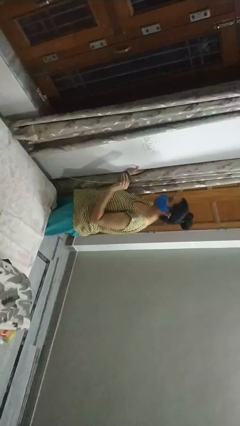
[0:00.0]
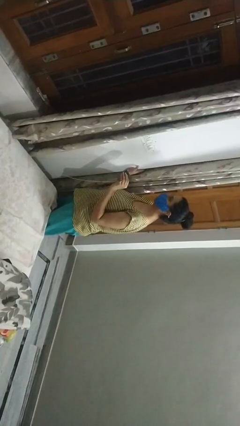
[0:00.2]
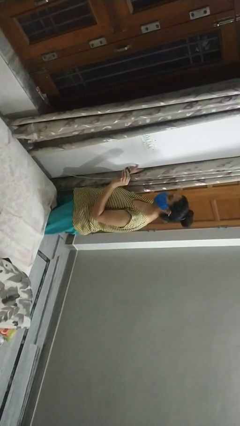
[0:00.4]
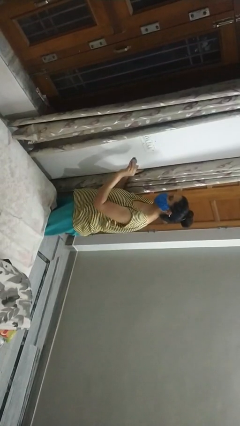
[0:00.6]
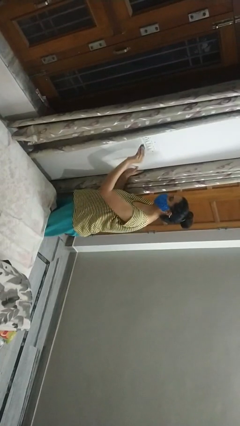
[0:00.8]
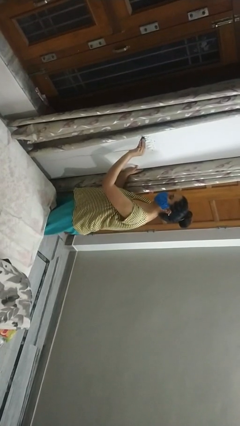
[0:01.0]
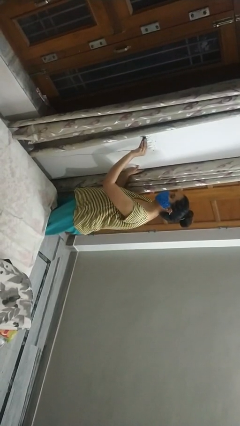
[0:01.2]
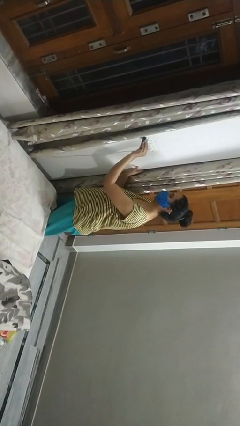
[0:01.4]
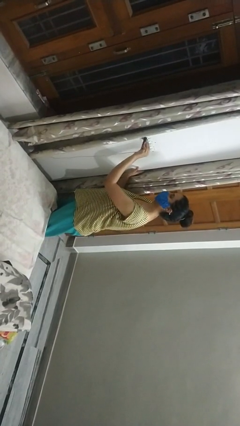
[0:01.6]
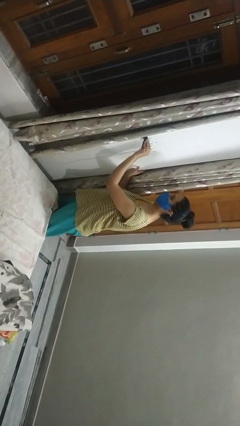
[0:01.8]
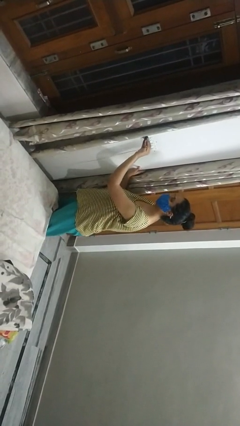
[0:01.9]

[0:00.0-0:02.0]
person plugs into electrical socket

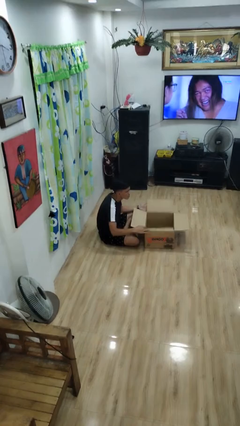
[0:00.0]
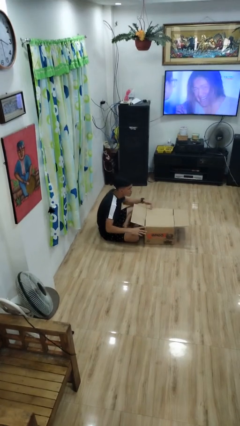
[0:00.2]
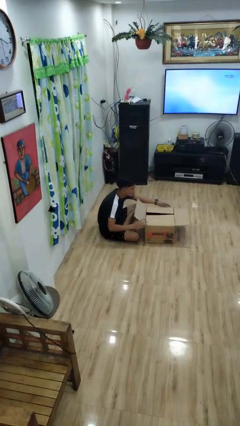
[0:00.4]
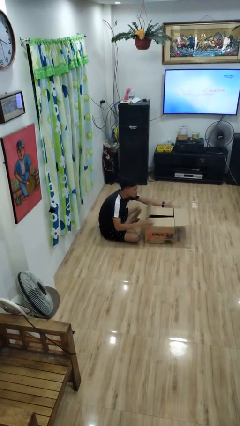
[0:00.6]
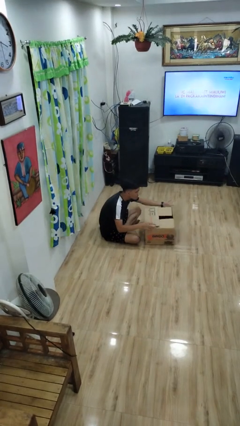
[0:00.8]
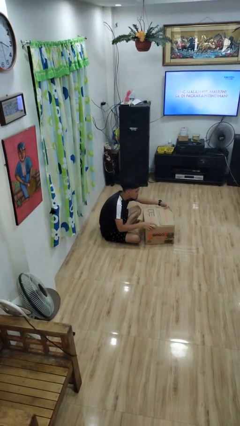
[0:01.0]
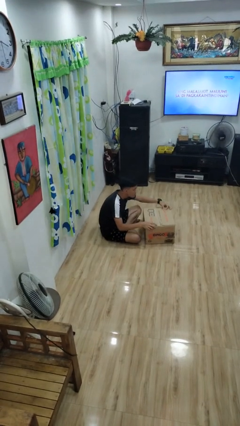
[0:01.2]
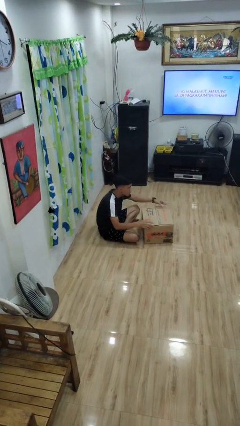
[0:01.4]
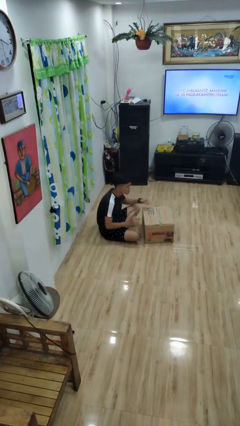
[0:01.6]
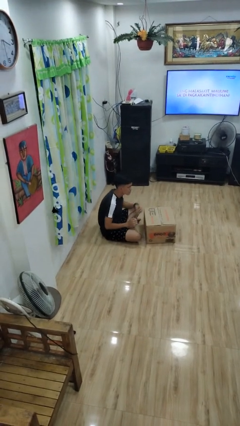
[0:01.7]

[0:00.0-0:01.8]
person closes box

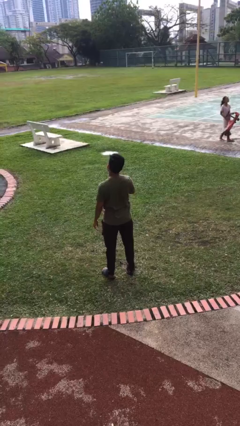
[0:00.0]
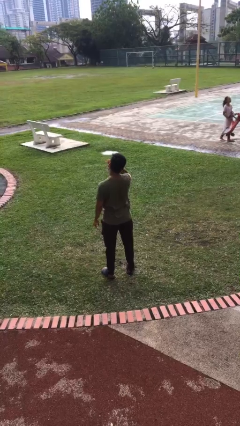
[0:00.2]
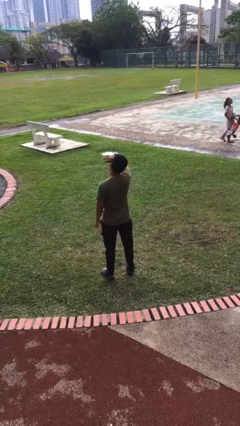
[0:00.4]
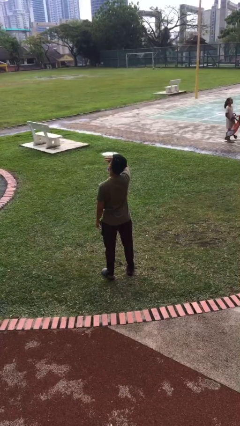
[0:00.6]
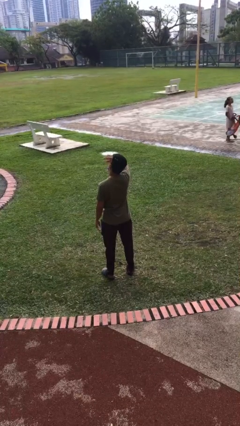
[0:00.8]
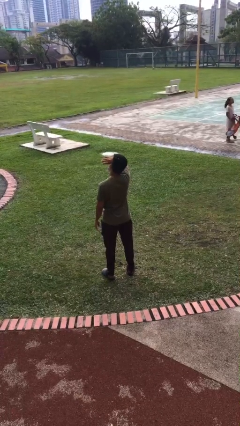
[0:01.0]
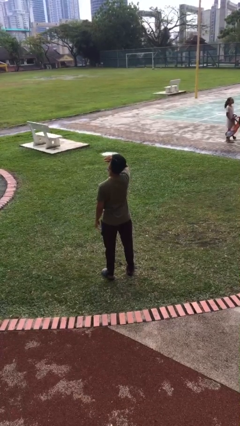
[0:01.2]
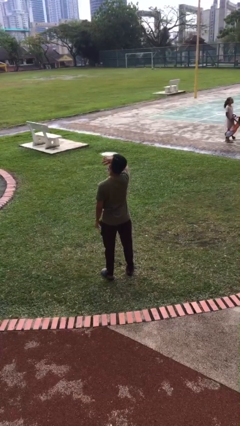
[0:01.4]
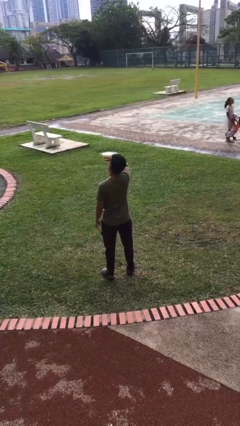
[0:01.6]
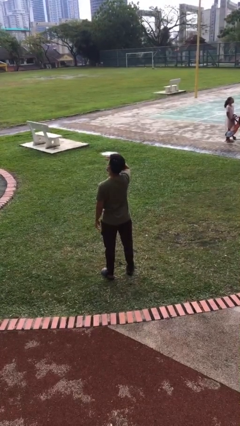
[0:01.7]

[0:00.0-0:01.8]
person rubs eyes

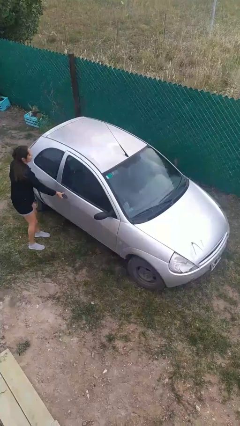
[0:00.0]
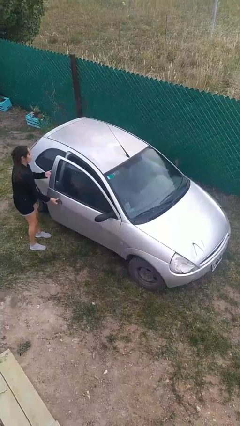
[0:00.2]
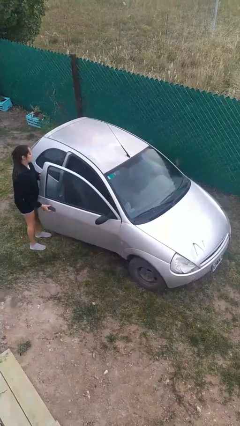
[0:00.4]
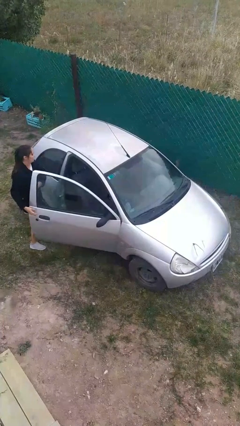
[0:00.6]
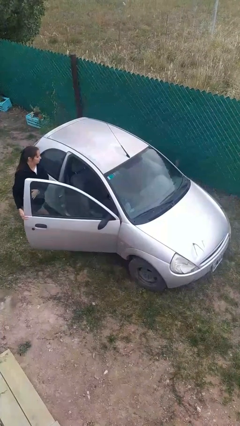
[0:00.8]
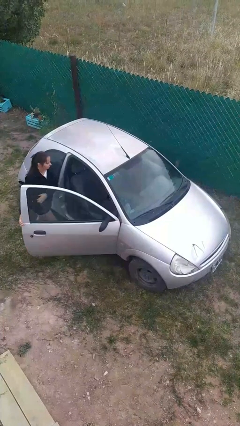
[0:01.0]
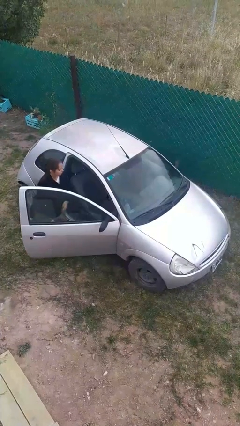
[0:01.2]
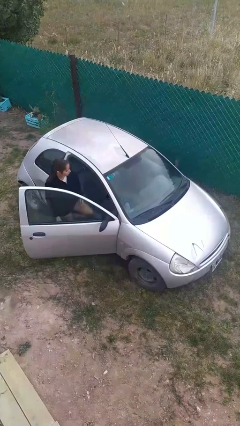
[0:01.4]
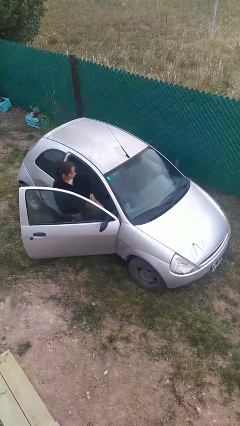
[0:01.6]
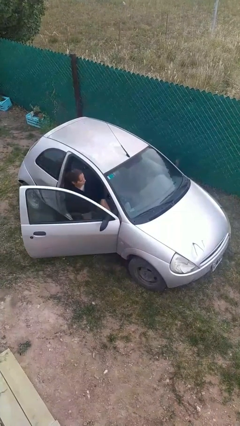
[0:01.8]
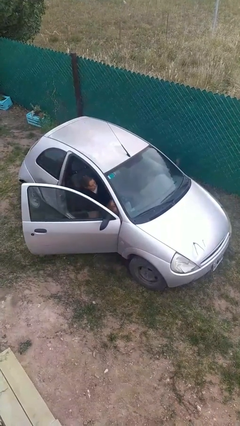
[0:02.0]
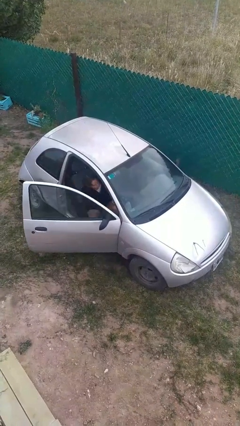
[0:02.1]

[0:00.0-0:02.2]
car picks up person

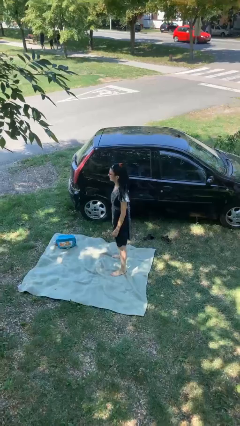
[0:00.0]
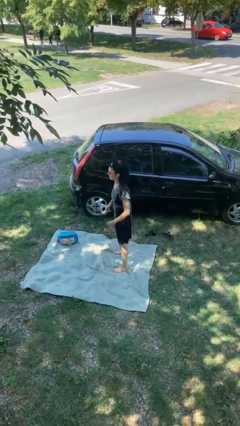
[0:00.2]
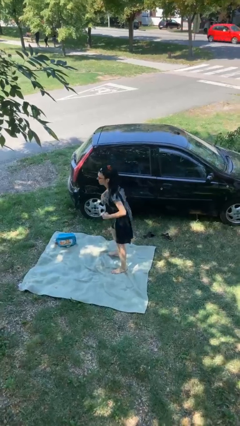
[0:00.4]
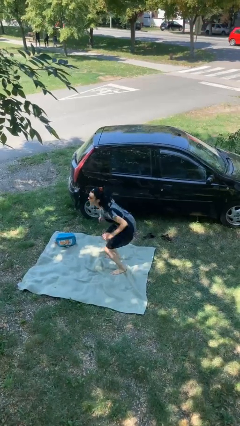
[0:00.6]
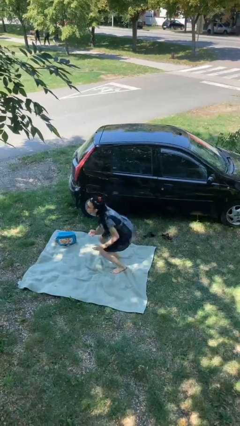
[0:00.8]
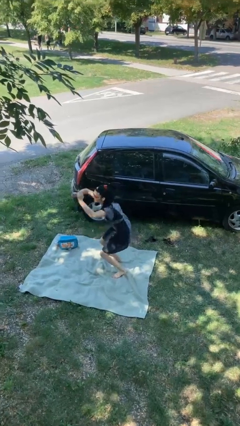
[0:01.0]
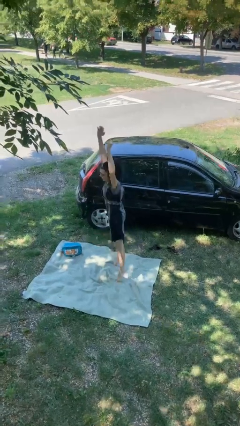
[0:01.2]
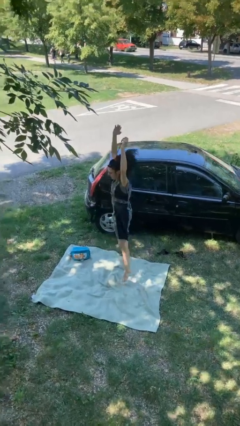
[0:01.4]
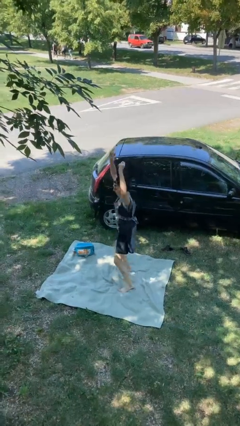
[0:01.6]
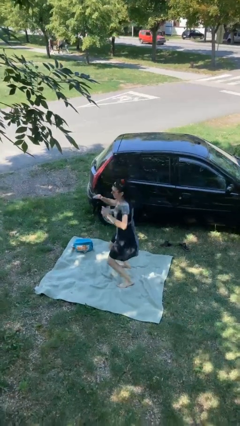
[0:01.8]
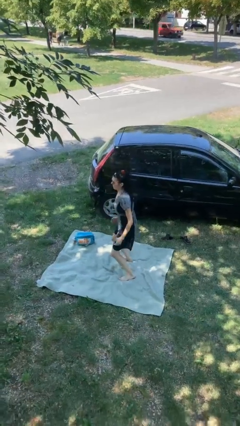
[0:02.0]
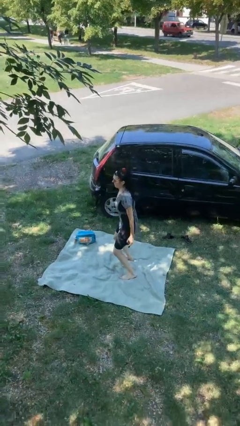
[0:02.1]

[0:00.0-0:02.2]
person jumps

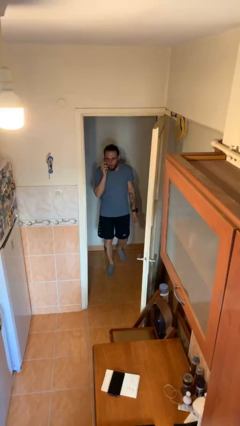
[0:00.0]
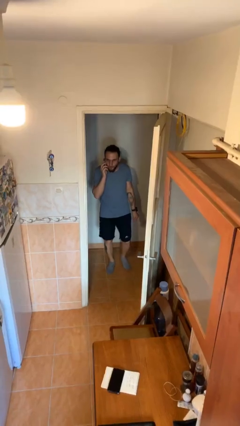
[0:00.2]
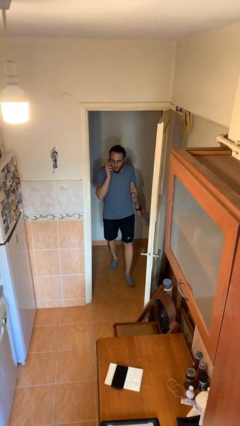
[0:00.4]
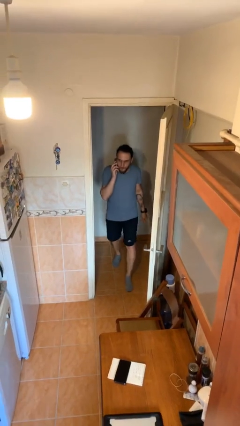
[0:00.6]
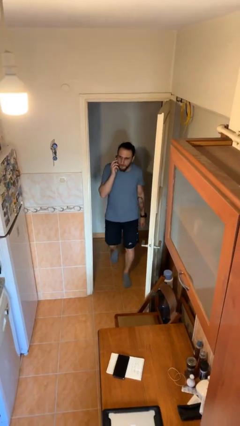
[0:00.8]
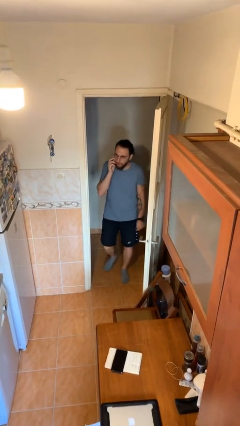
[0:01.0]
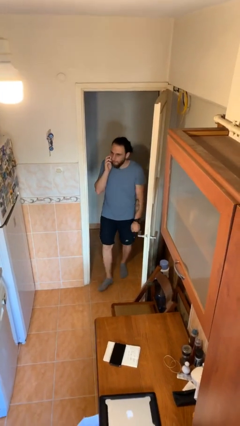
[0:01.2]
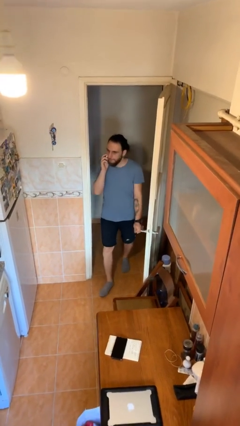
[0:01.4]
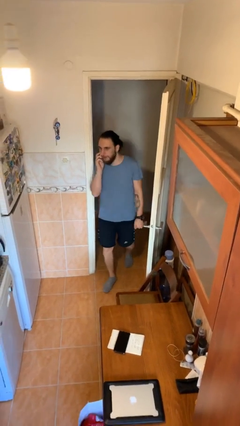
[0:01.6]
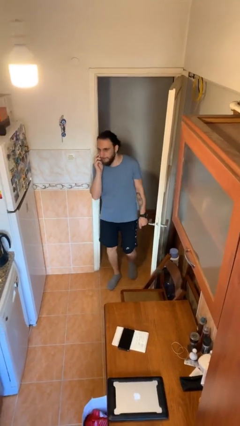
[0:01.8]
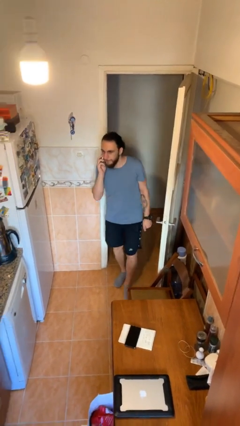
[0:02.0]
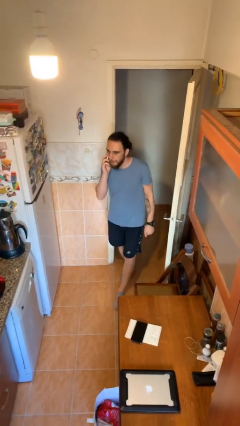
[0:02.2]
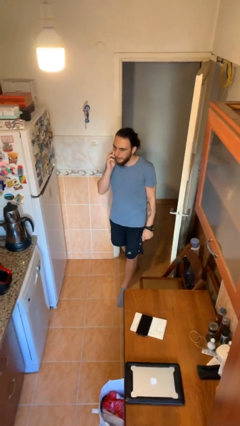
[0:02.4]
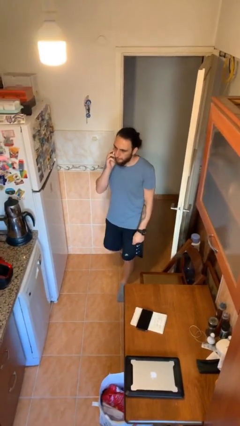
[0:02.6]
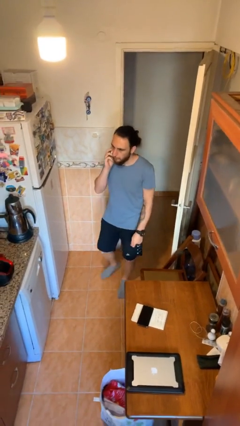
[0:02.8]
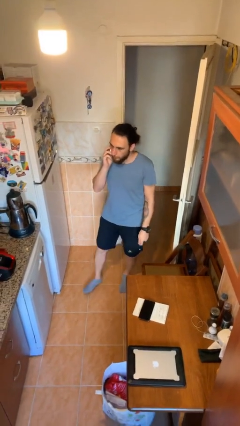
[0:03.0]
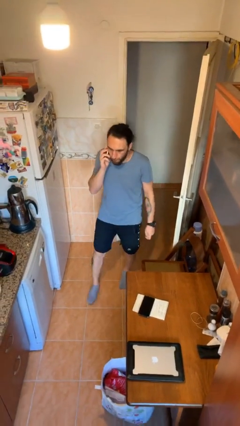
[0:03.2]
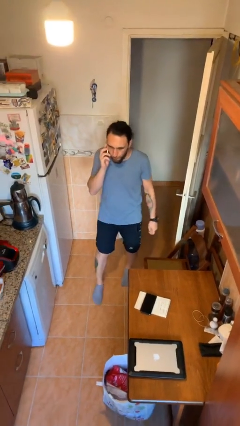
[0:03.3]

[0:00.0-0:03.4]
person enters scene through structure

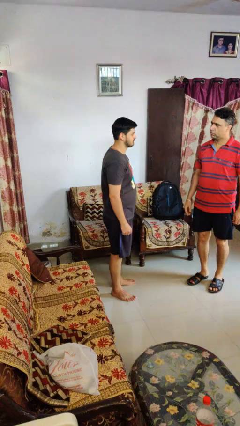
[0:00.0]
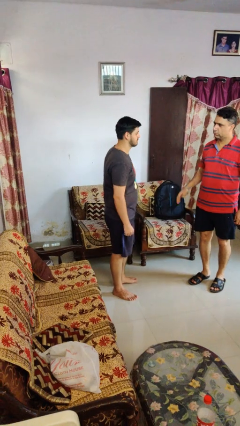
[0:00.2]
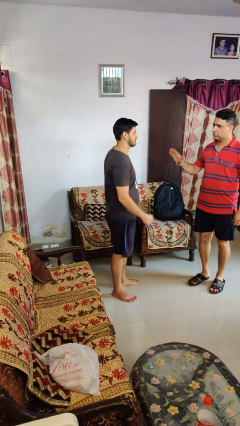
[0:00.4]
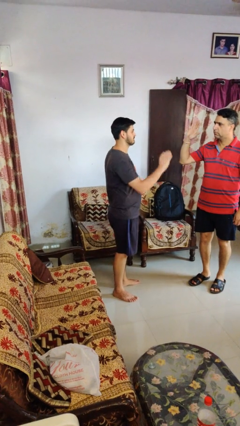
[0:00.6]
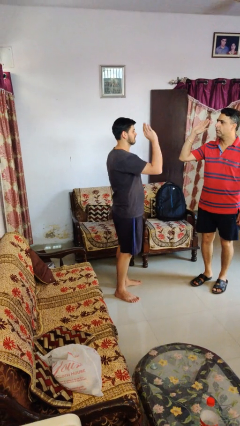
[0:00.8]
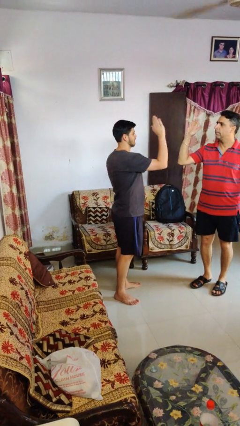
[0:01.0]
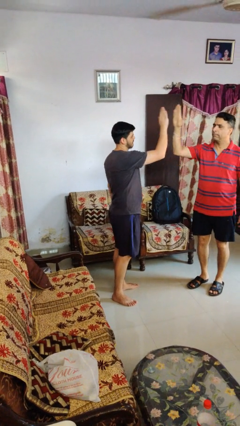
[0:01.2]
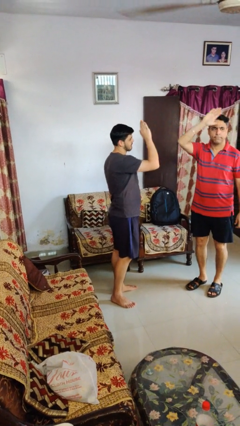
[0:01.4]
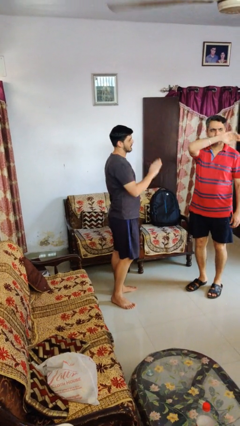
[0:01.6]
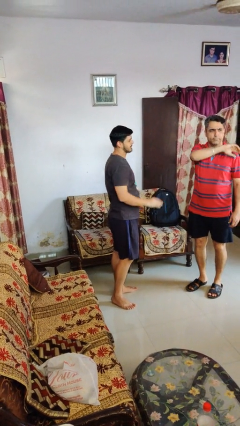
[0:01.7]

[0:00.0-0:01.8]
person highfives hand

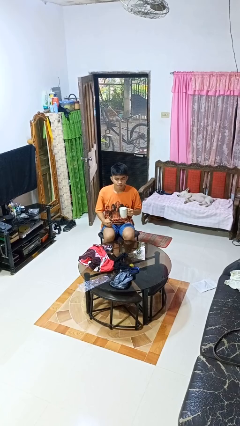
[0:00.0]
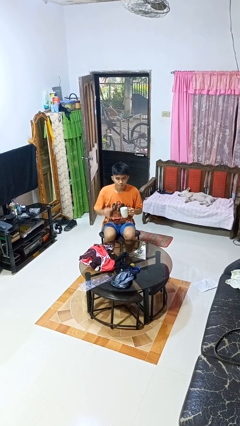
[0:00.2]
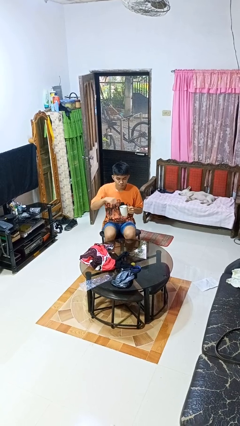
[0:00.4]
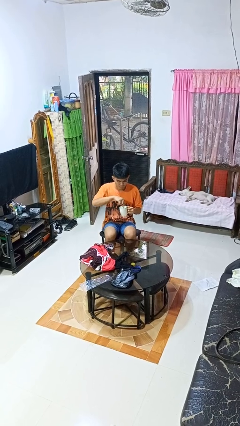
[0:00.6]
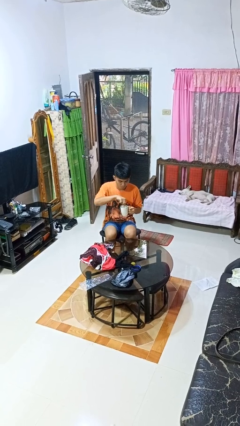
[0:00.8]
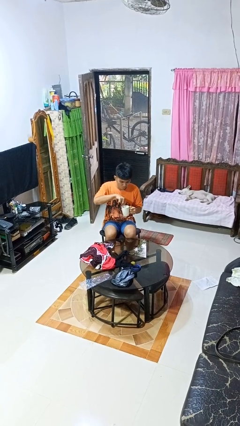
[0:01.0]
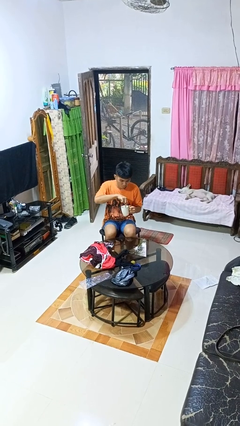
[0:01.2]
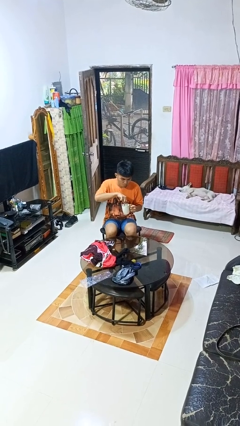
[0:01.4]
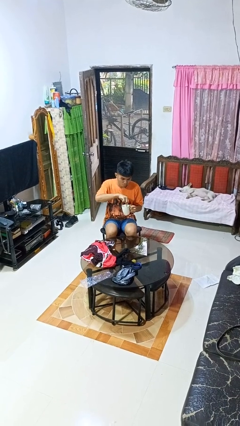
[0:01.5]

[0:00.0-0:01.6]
person stirs mug

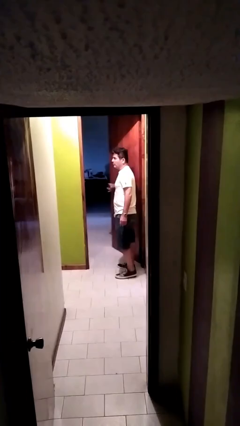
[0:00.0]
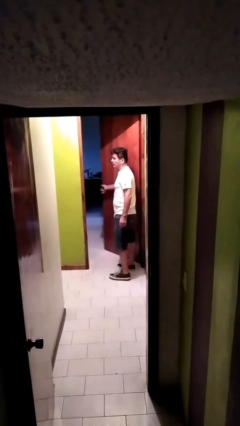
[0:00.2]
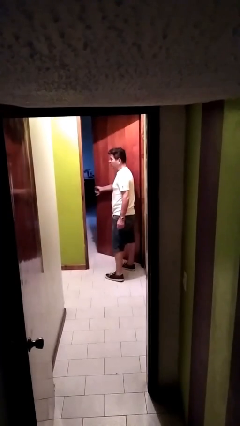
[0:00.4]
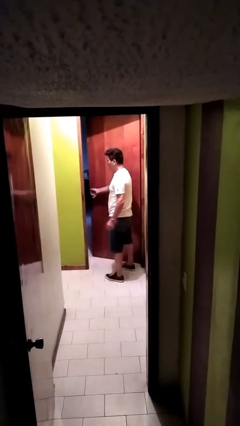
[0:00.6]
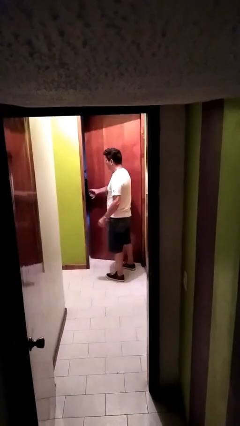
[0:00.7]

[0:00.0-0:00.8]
person closes facility door
